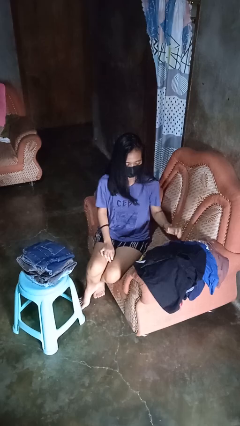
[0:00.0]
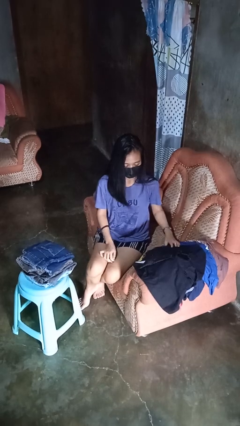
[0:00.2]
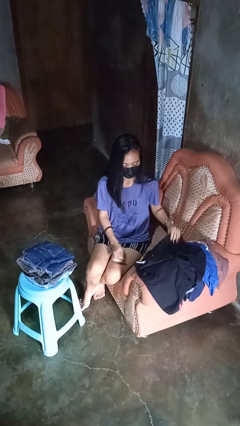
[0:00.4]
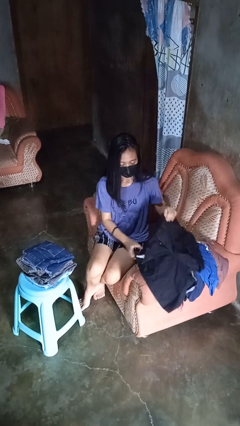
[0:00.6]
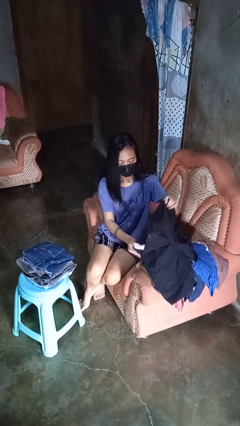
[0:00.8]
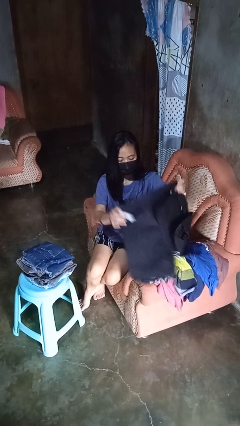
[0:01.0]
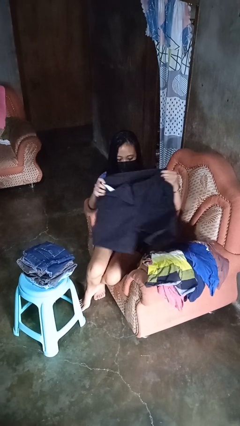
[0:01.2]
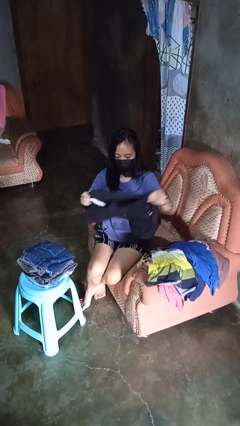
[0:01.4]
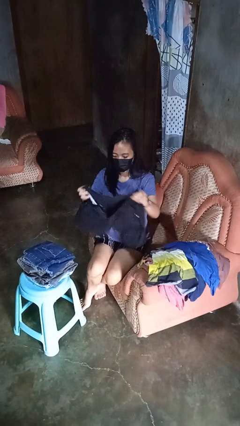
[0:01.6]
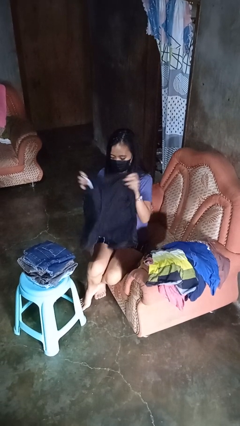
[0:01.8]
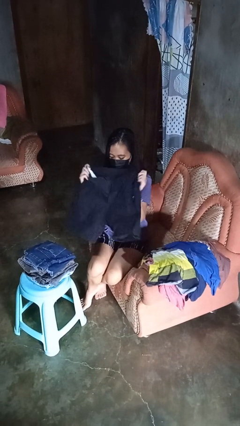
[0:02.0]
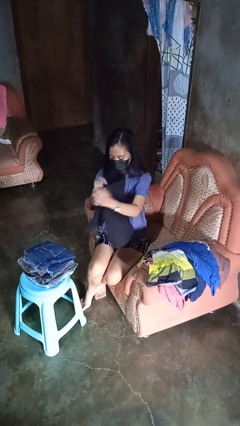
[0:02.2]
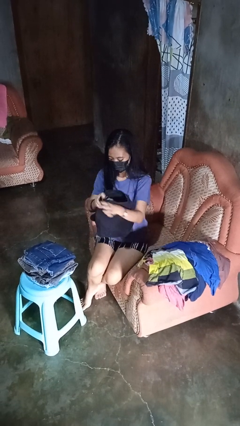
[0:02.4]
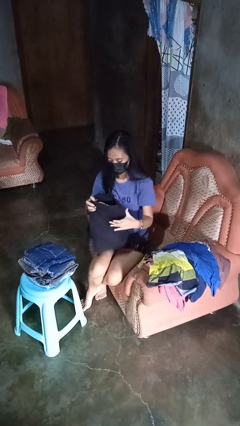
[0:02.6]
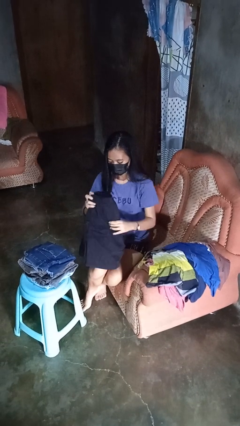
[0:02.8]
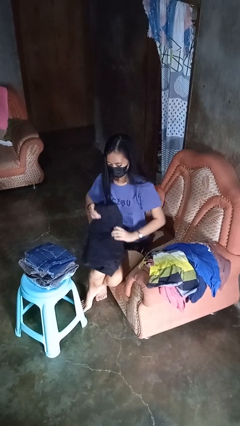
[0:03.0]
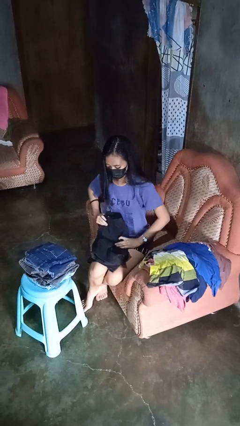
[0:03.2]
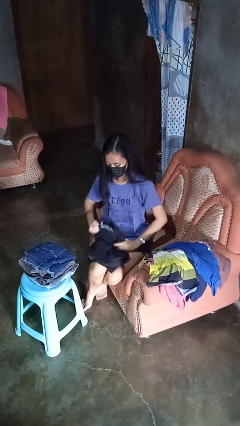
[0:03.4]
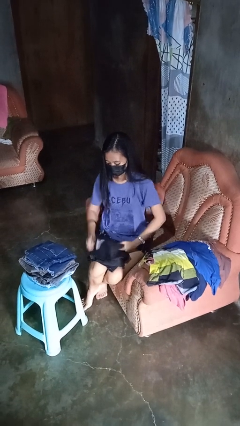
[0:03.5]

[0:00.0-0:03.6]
person folds pants

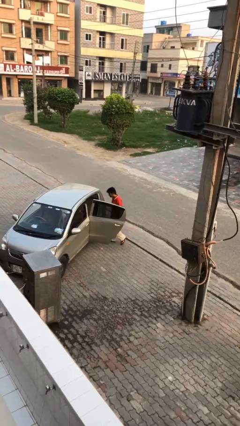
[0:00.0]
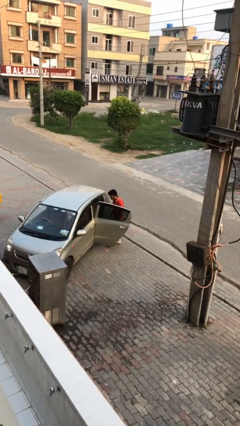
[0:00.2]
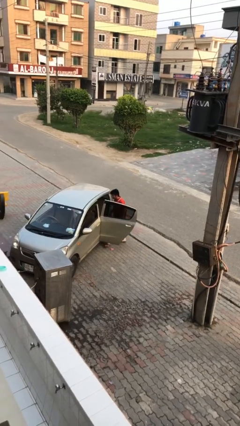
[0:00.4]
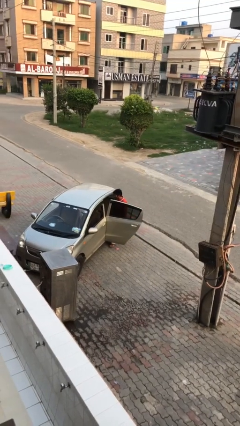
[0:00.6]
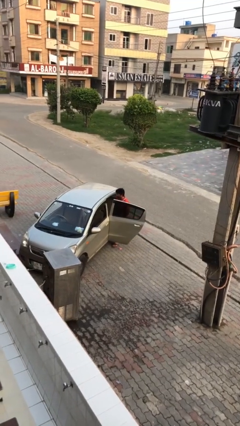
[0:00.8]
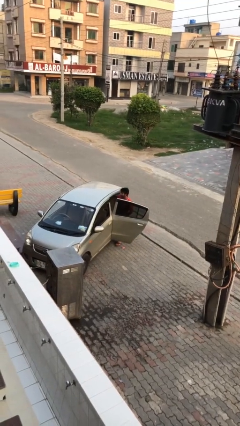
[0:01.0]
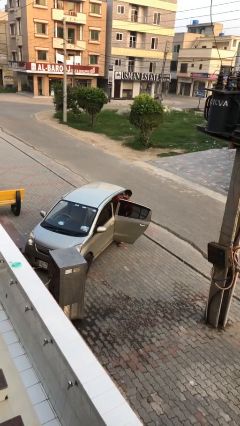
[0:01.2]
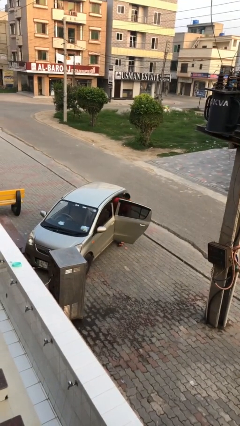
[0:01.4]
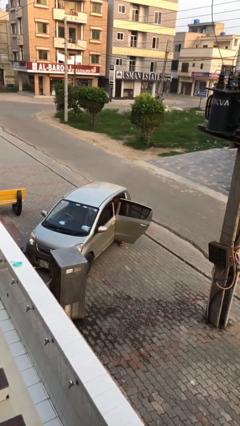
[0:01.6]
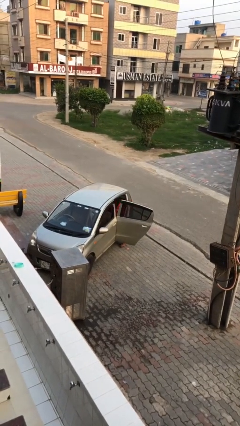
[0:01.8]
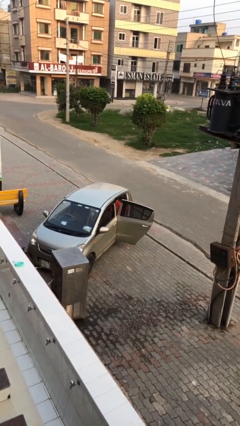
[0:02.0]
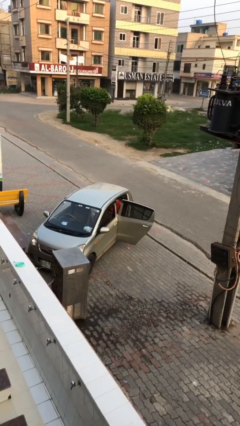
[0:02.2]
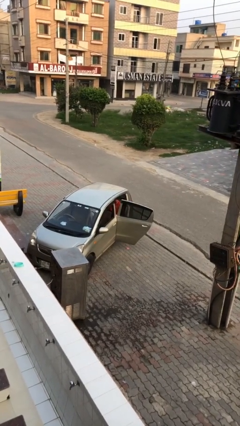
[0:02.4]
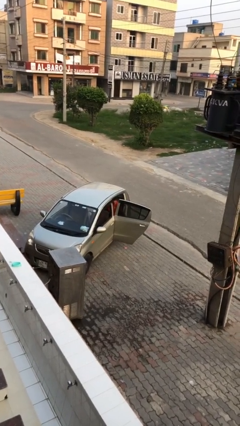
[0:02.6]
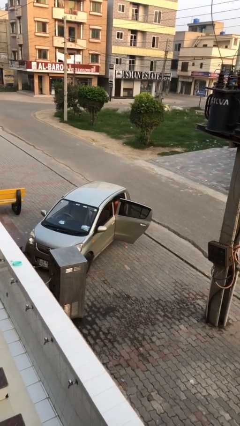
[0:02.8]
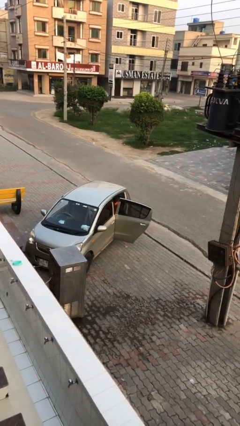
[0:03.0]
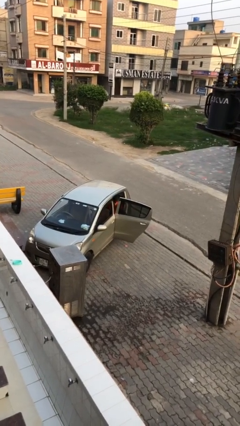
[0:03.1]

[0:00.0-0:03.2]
person enters car

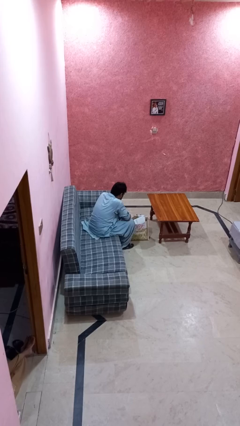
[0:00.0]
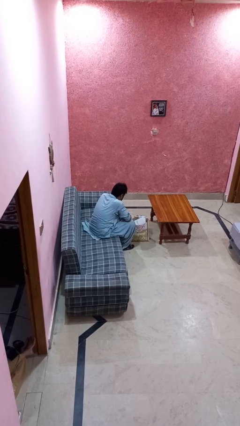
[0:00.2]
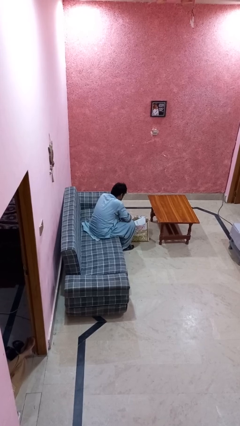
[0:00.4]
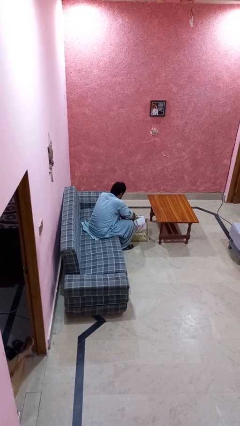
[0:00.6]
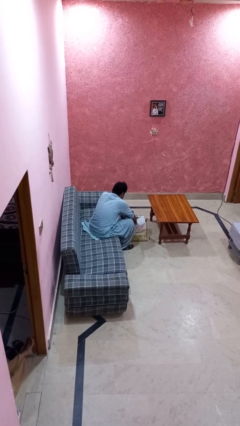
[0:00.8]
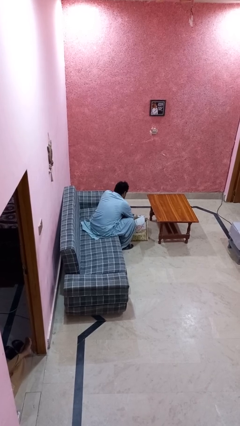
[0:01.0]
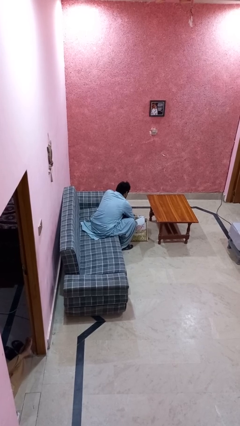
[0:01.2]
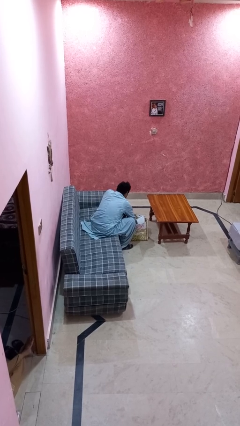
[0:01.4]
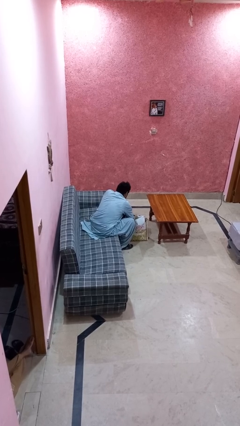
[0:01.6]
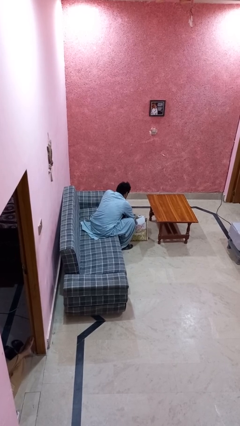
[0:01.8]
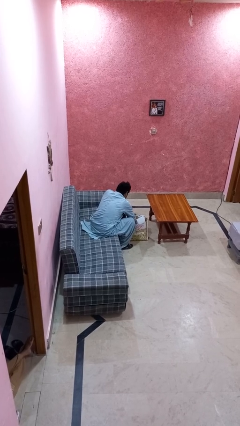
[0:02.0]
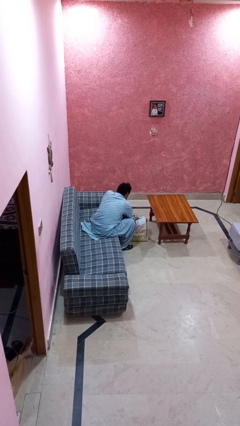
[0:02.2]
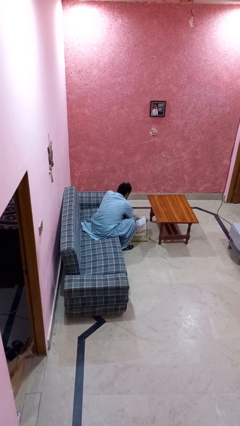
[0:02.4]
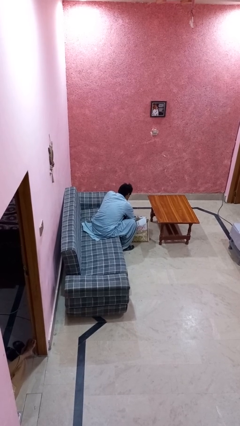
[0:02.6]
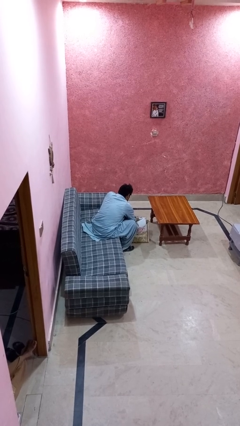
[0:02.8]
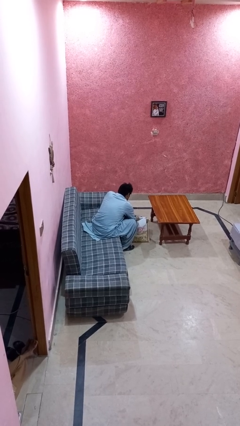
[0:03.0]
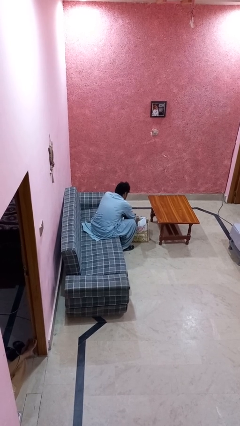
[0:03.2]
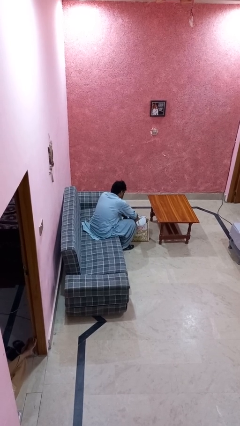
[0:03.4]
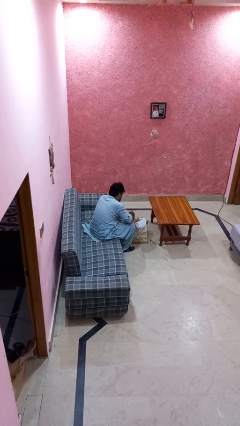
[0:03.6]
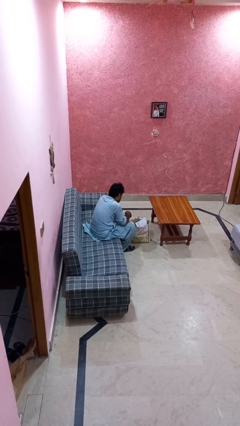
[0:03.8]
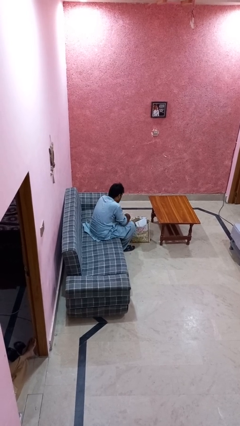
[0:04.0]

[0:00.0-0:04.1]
person searches in bag

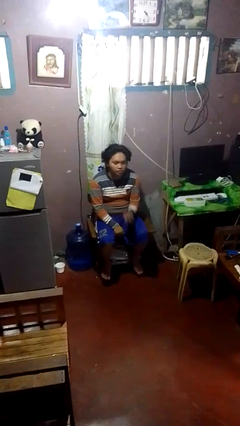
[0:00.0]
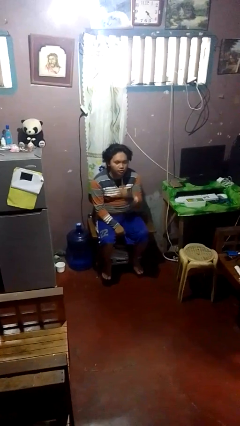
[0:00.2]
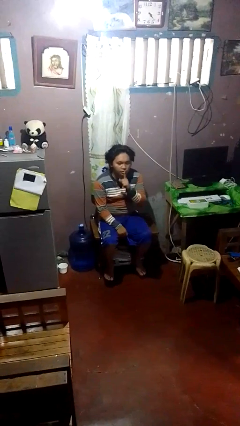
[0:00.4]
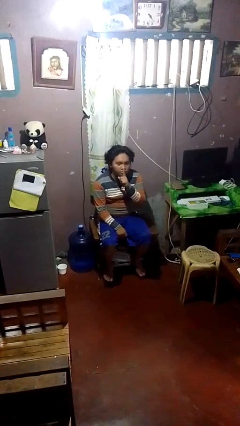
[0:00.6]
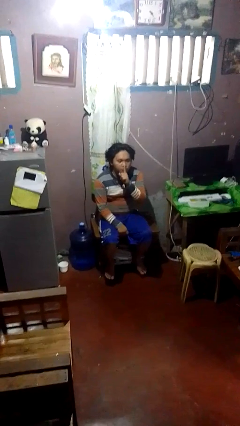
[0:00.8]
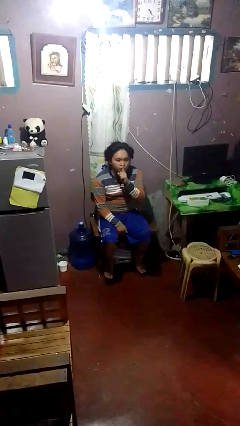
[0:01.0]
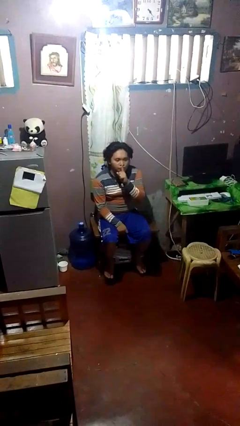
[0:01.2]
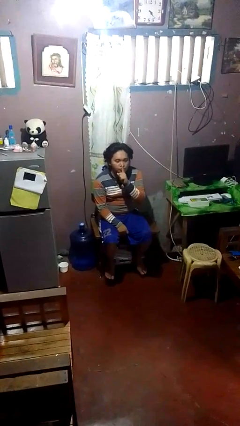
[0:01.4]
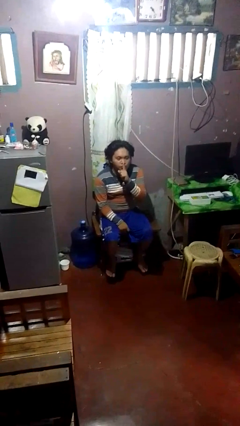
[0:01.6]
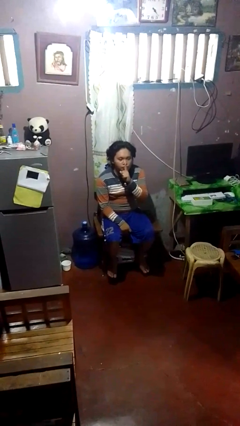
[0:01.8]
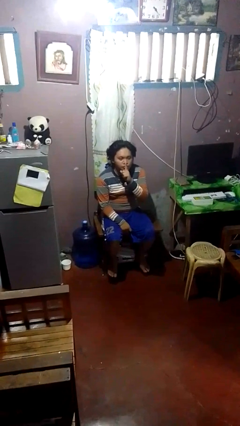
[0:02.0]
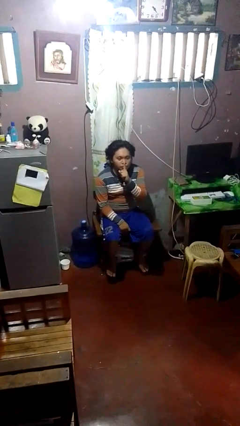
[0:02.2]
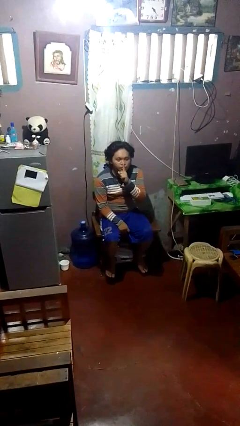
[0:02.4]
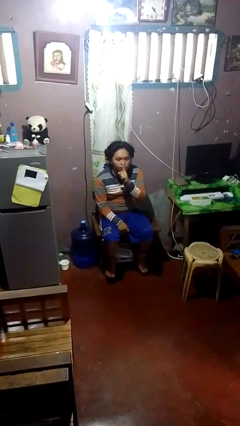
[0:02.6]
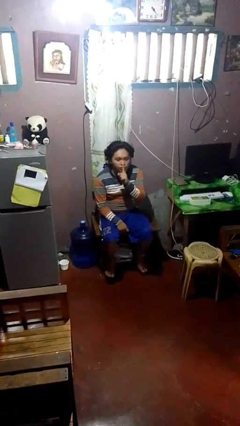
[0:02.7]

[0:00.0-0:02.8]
person gestures be quiet

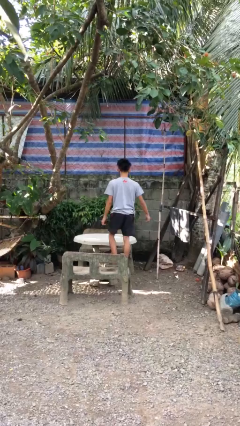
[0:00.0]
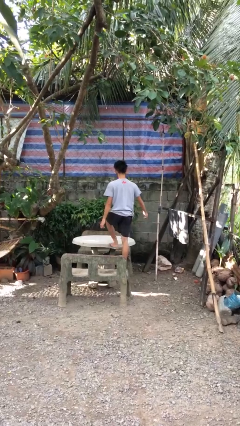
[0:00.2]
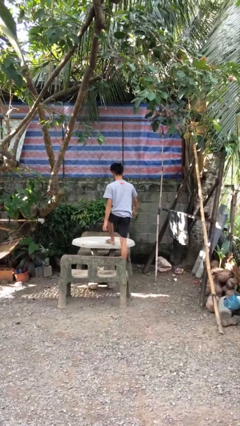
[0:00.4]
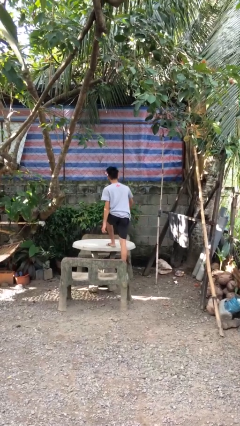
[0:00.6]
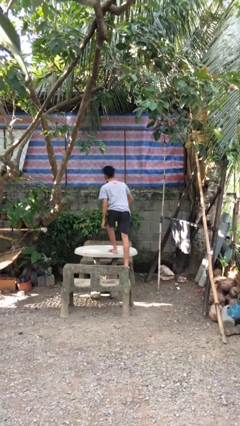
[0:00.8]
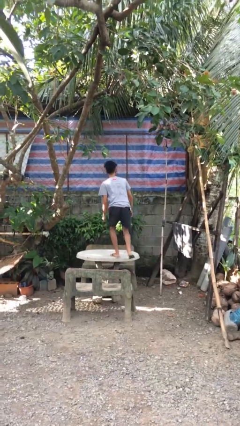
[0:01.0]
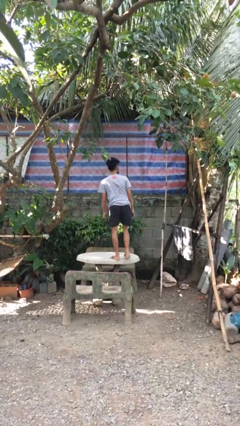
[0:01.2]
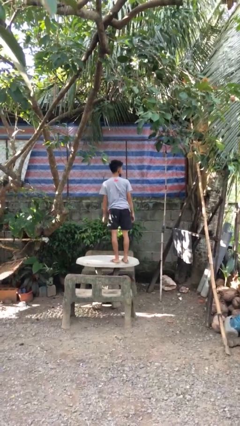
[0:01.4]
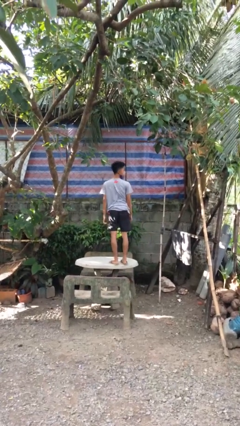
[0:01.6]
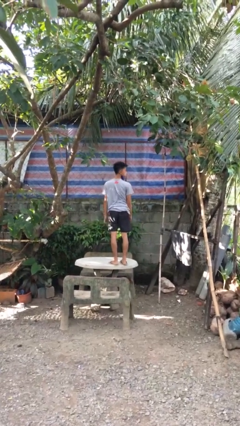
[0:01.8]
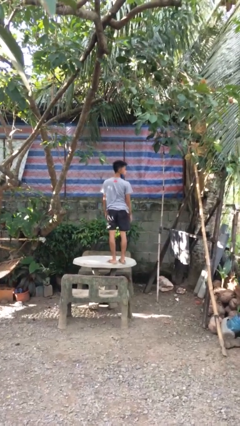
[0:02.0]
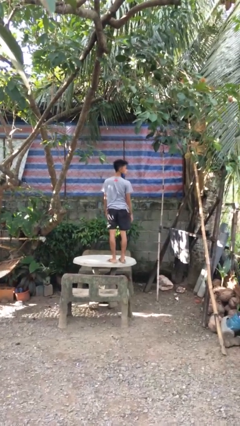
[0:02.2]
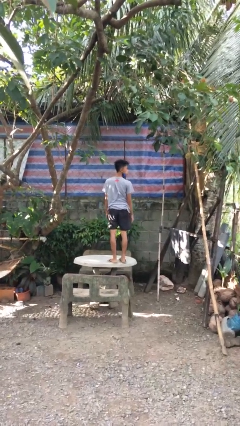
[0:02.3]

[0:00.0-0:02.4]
person climbs on table

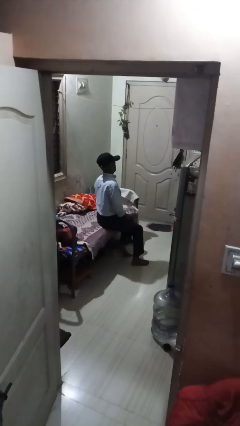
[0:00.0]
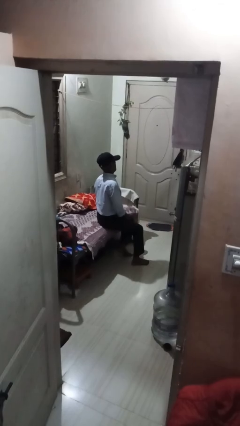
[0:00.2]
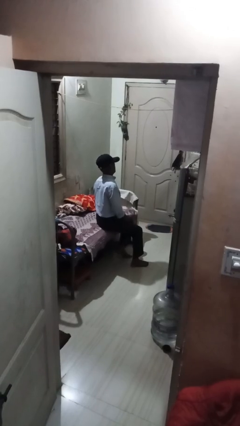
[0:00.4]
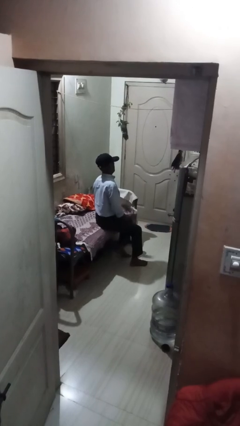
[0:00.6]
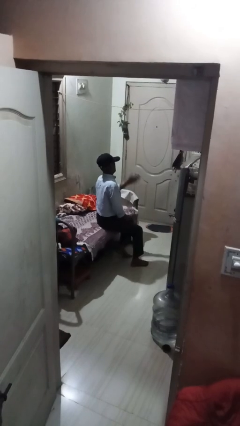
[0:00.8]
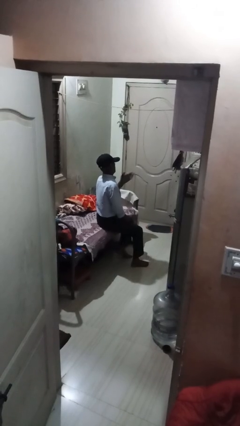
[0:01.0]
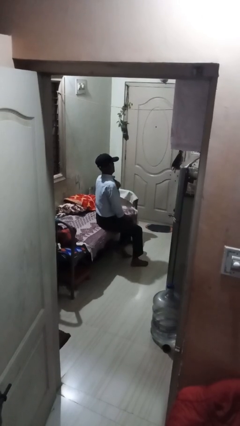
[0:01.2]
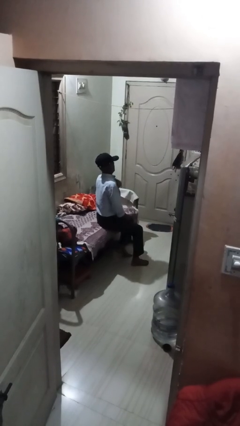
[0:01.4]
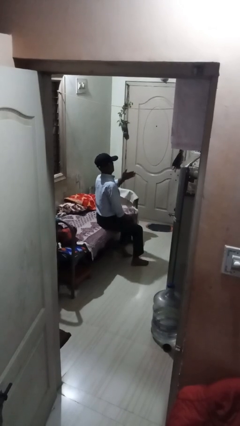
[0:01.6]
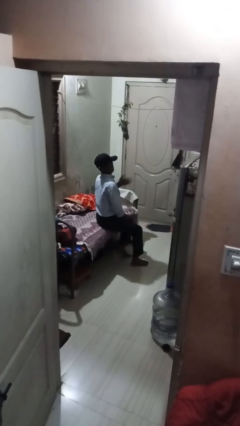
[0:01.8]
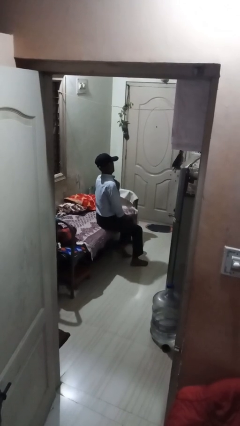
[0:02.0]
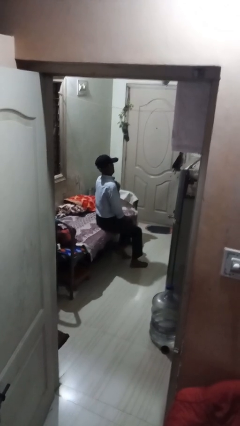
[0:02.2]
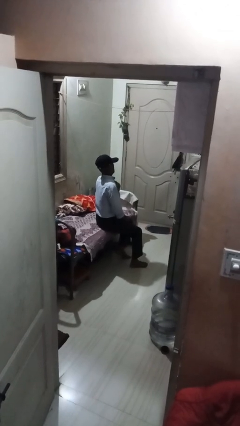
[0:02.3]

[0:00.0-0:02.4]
person drums on chest
